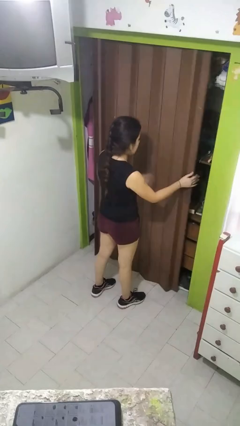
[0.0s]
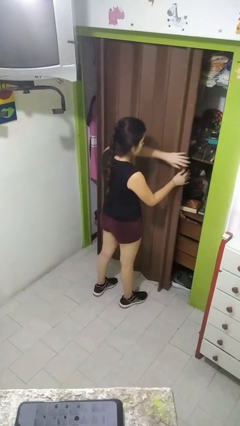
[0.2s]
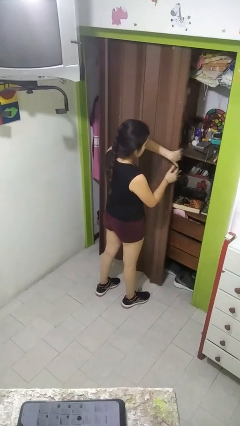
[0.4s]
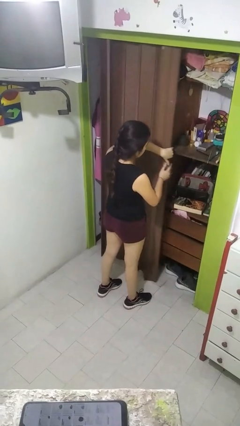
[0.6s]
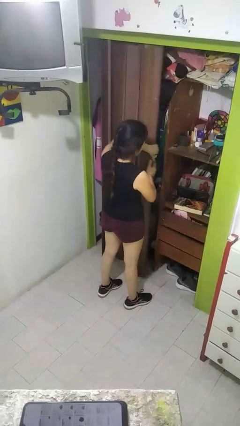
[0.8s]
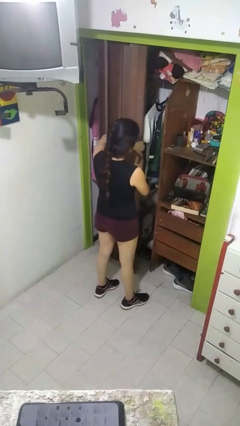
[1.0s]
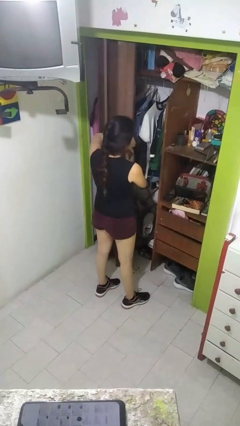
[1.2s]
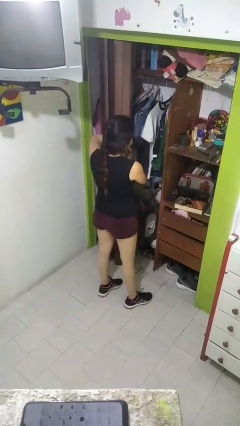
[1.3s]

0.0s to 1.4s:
person opens closet door

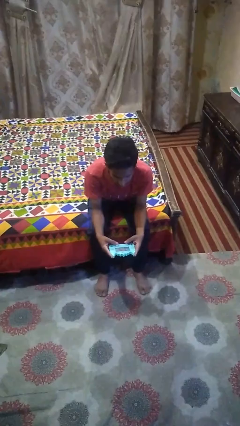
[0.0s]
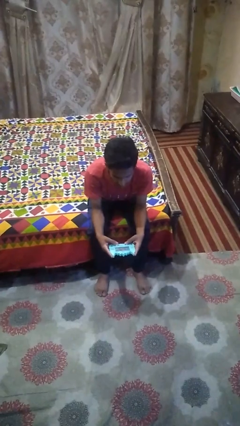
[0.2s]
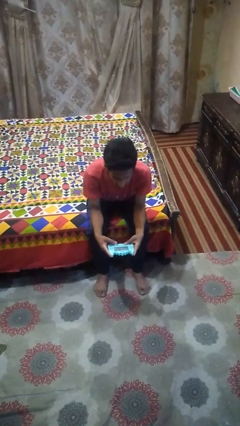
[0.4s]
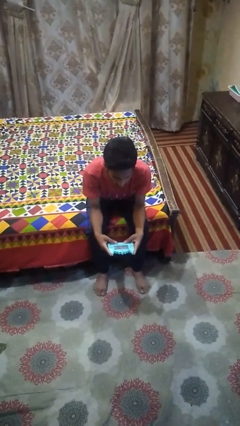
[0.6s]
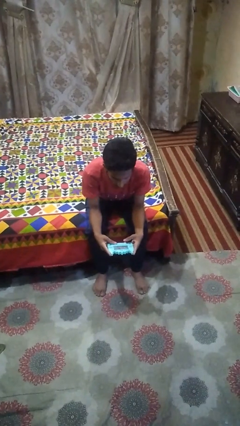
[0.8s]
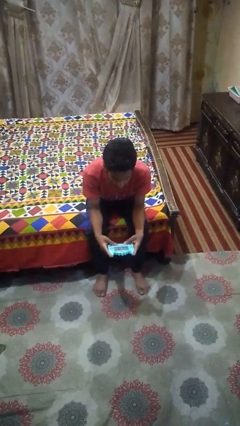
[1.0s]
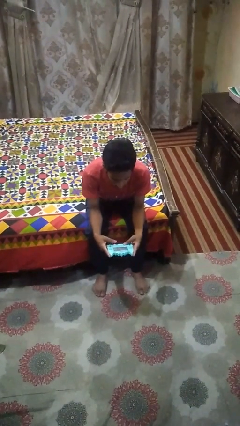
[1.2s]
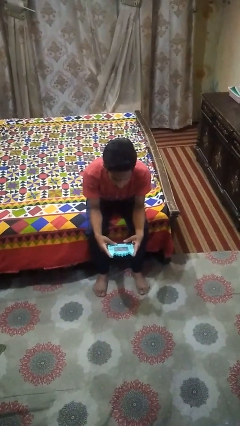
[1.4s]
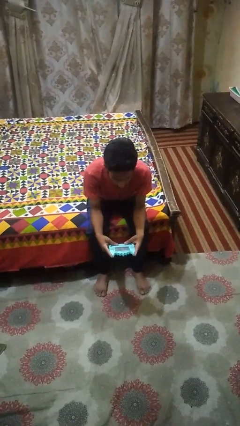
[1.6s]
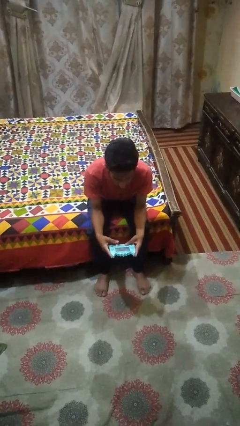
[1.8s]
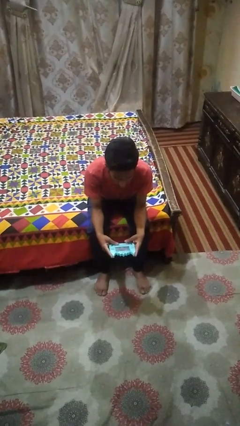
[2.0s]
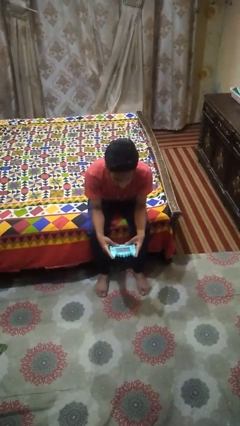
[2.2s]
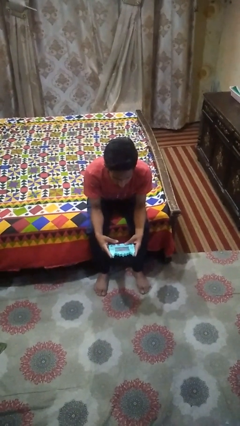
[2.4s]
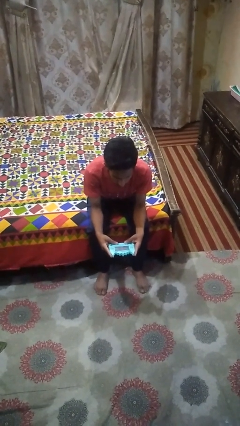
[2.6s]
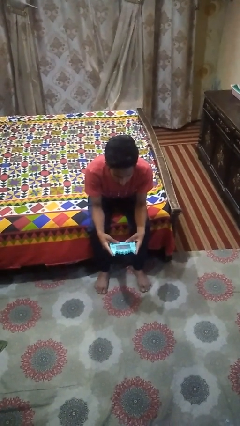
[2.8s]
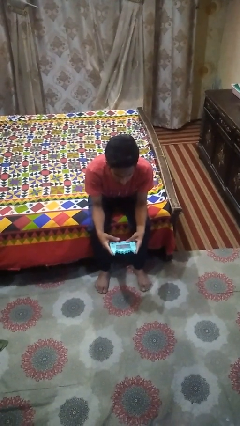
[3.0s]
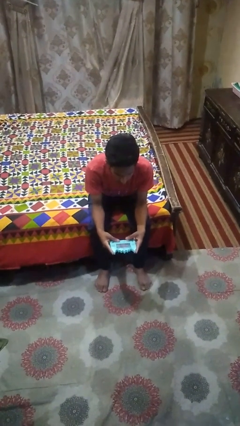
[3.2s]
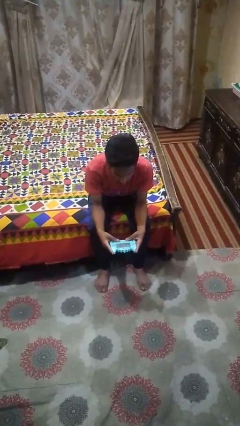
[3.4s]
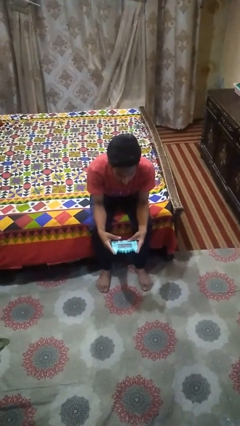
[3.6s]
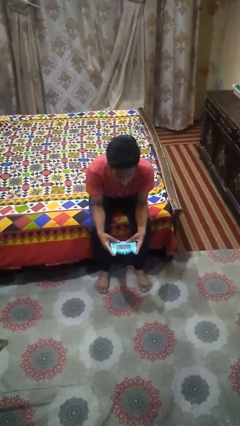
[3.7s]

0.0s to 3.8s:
person interacts with handheld game

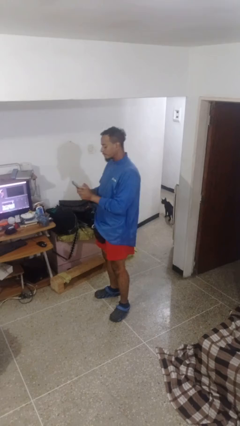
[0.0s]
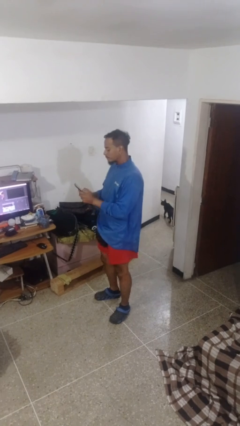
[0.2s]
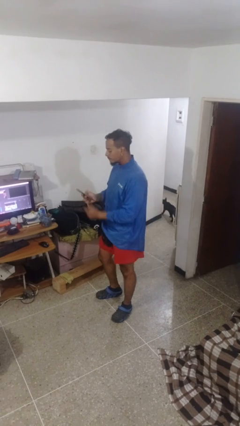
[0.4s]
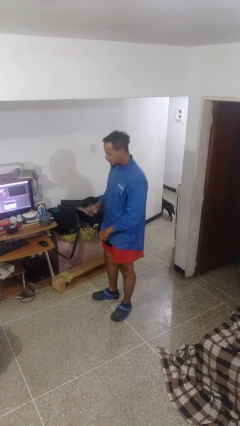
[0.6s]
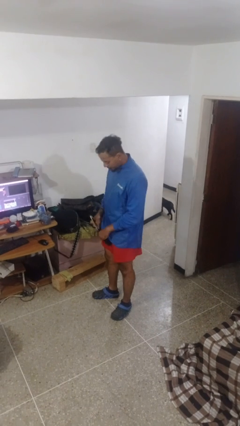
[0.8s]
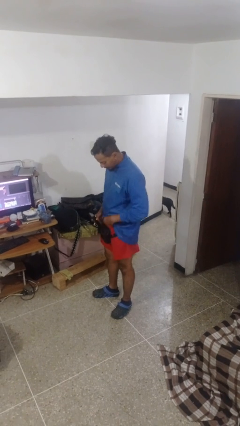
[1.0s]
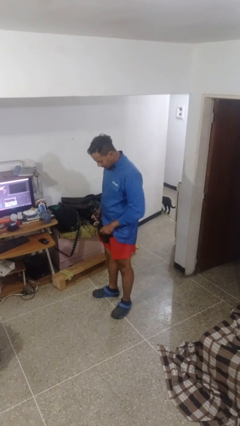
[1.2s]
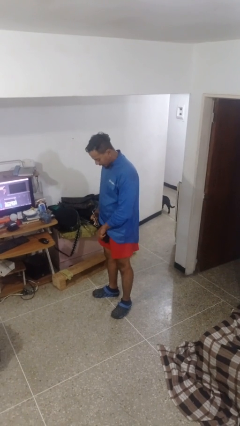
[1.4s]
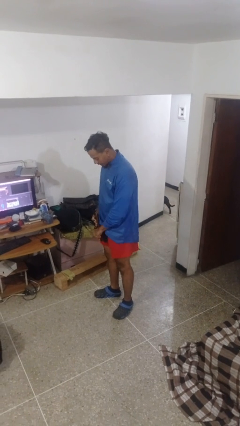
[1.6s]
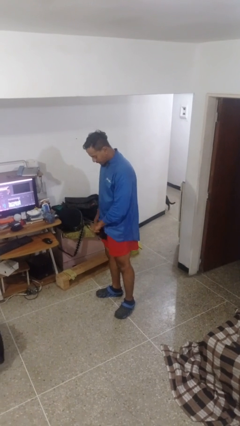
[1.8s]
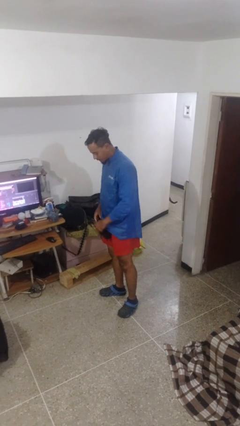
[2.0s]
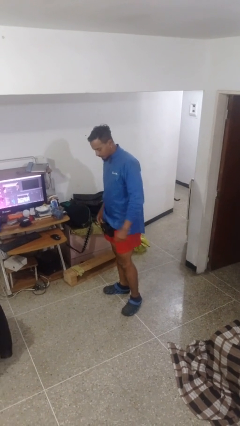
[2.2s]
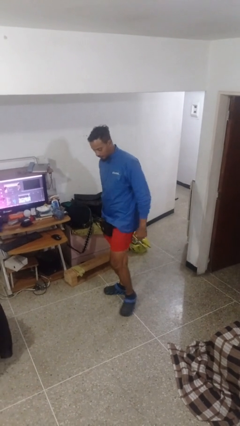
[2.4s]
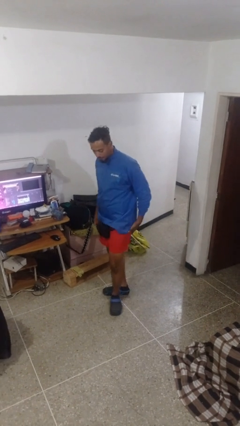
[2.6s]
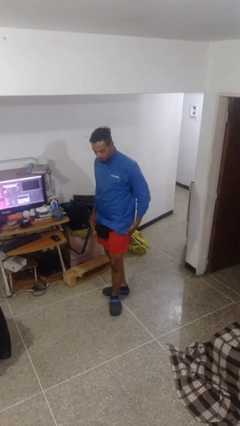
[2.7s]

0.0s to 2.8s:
person puts phone into pocket

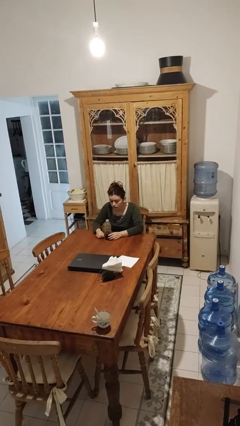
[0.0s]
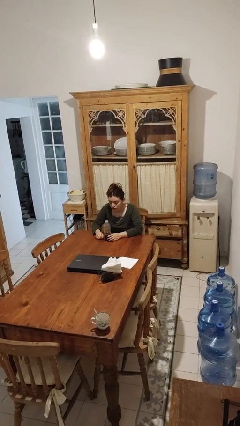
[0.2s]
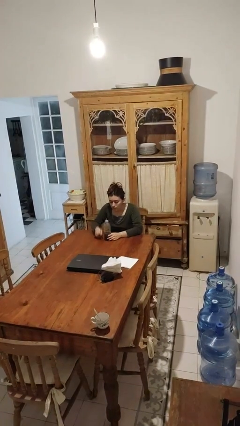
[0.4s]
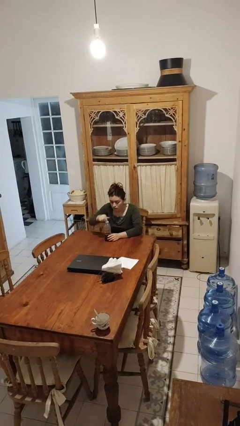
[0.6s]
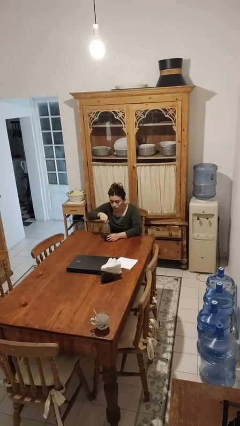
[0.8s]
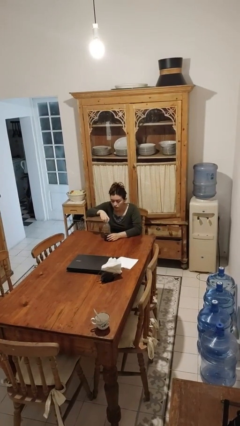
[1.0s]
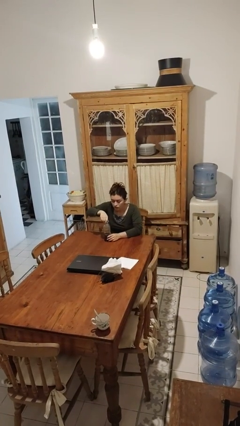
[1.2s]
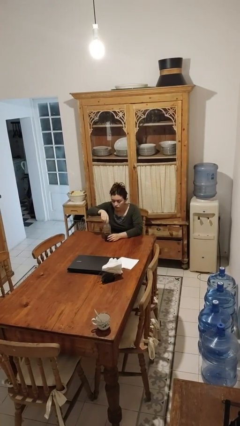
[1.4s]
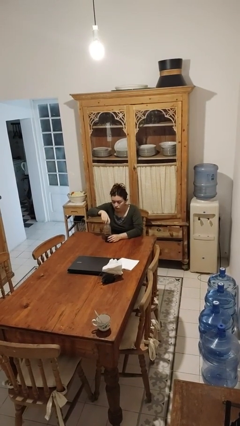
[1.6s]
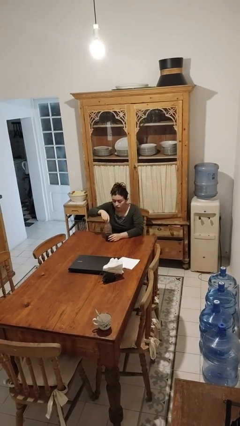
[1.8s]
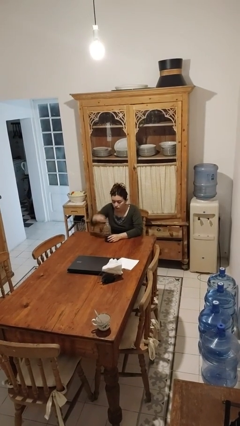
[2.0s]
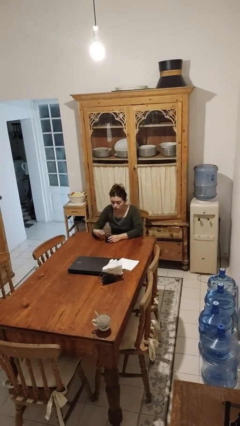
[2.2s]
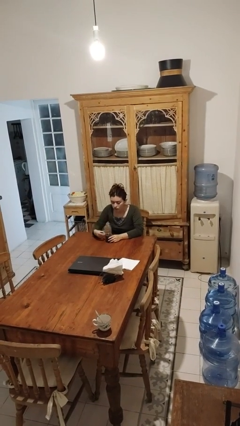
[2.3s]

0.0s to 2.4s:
person unscrews lid from bottle

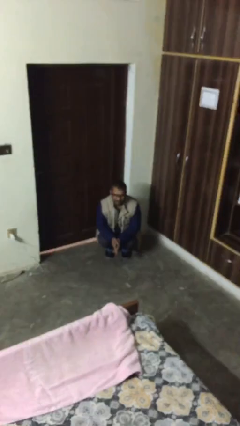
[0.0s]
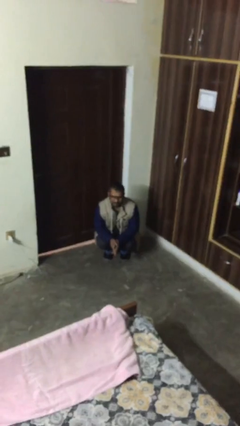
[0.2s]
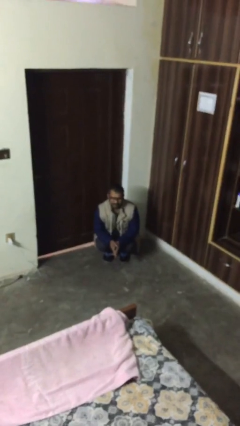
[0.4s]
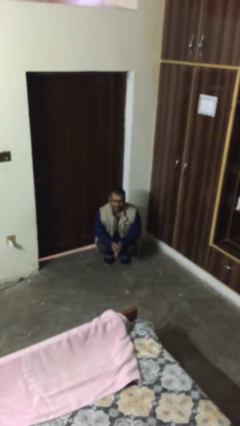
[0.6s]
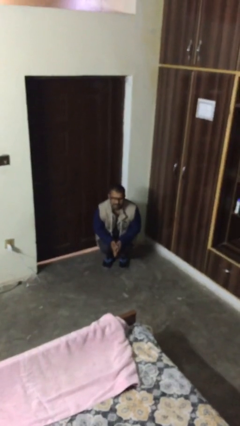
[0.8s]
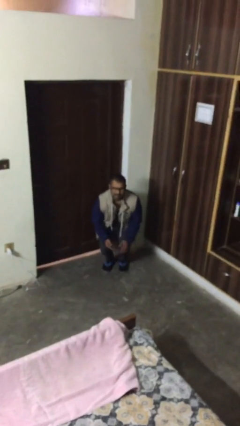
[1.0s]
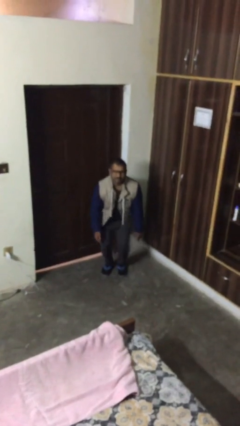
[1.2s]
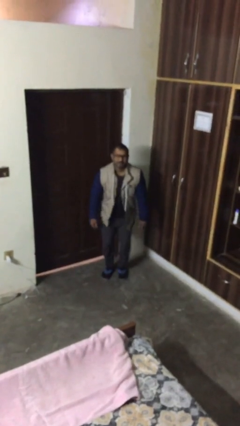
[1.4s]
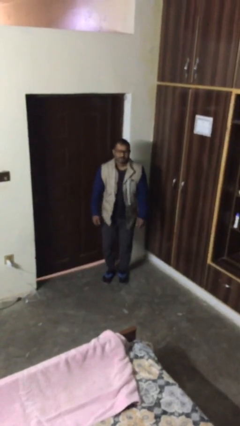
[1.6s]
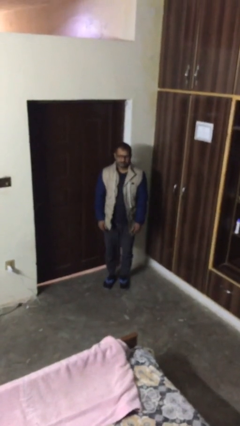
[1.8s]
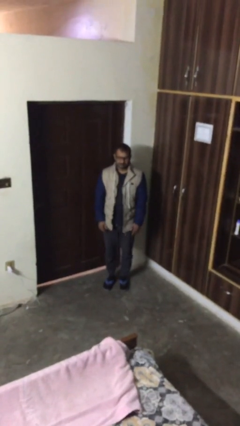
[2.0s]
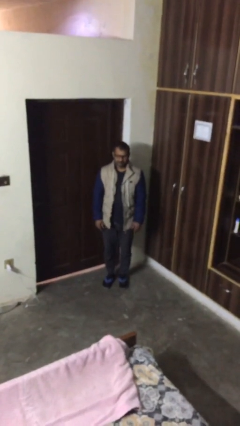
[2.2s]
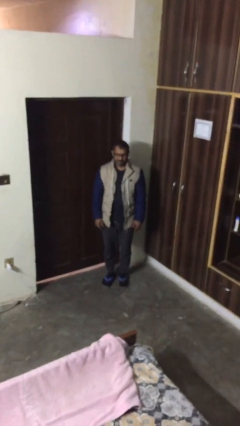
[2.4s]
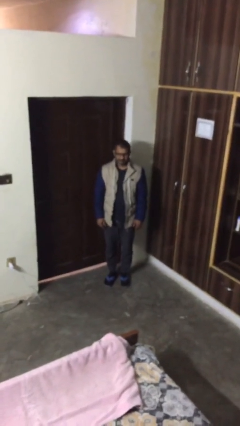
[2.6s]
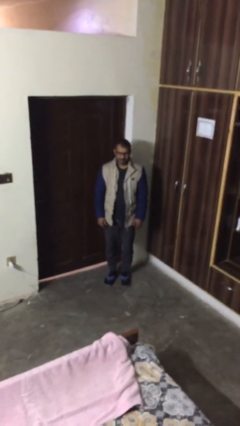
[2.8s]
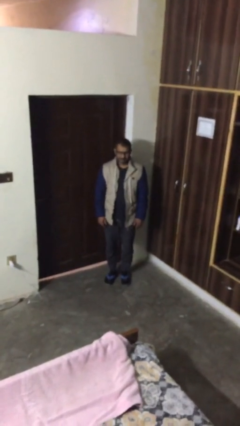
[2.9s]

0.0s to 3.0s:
person stands up

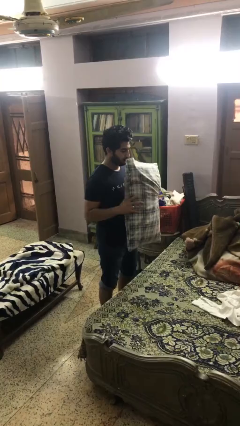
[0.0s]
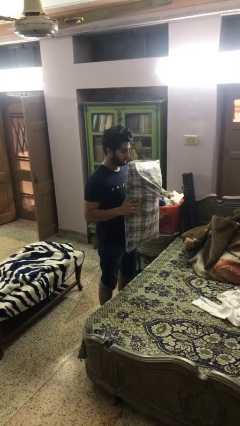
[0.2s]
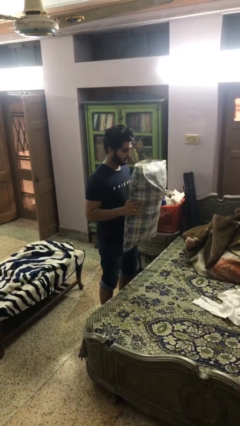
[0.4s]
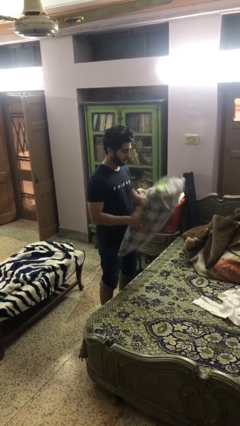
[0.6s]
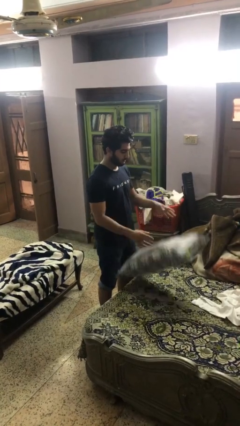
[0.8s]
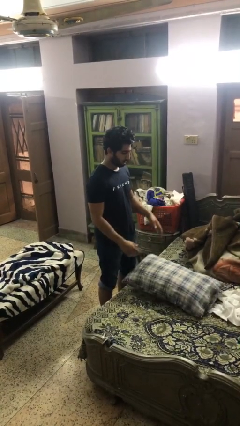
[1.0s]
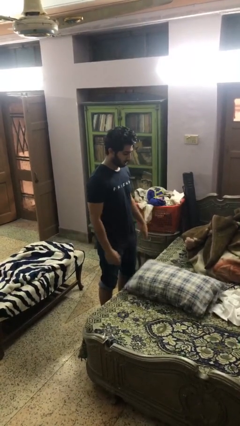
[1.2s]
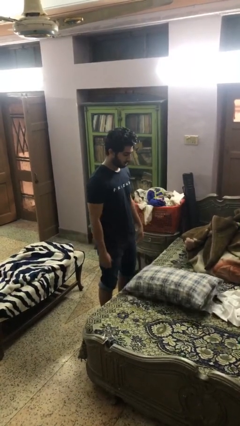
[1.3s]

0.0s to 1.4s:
person puts down object on bed

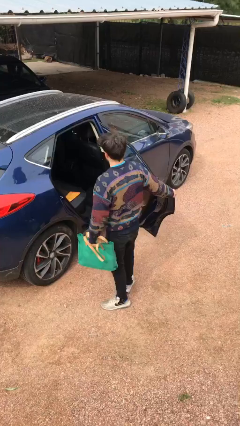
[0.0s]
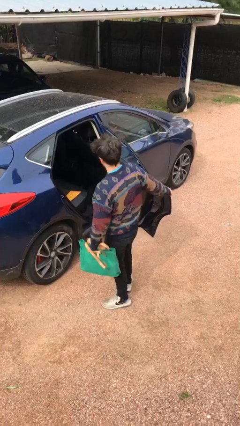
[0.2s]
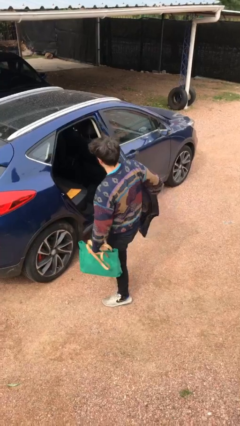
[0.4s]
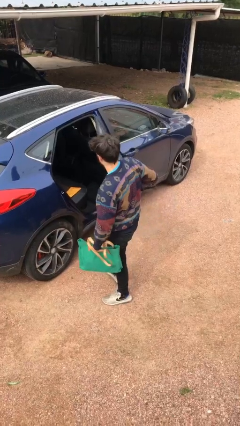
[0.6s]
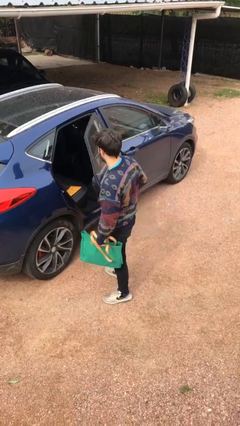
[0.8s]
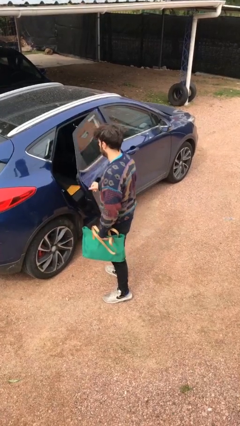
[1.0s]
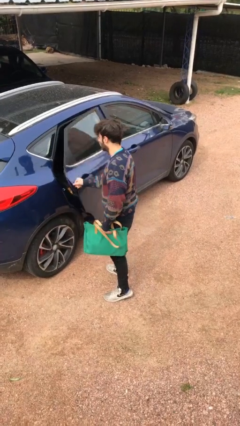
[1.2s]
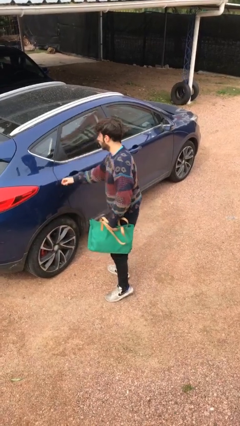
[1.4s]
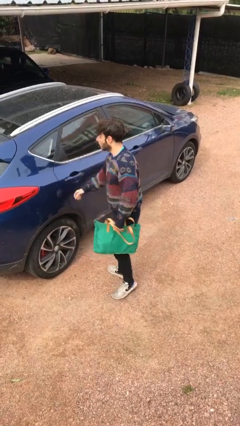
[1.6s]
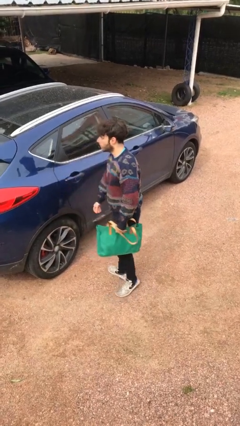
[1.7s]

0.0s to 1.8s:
person closes car door

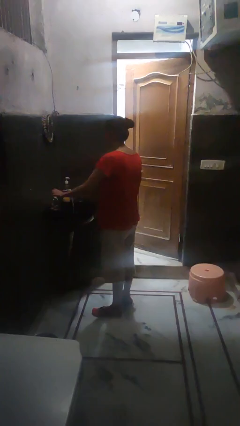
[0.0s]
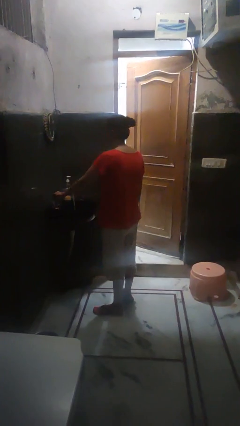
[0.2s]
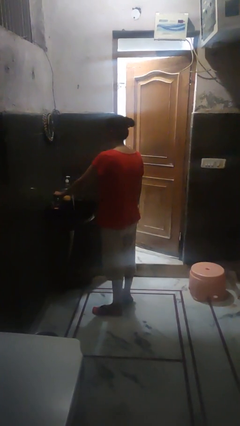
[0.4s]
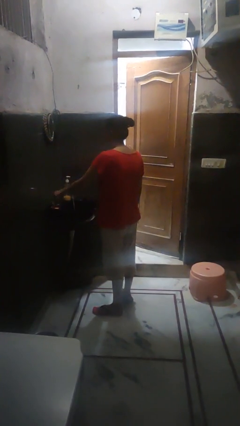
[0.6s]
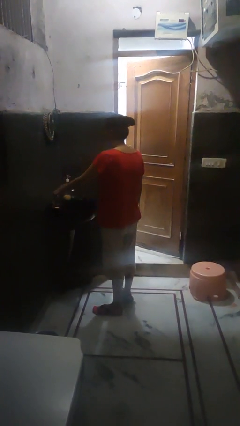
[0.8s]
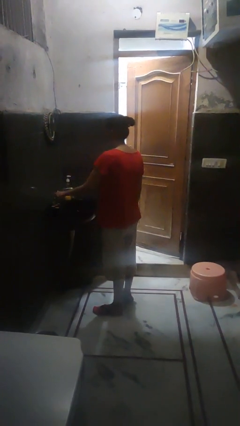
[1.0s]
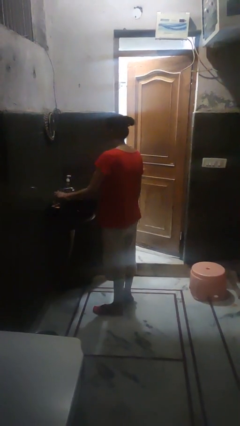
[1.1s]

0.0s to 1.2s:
person turns off faucet
